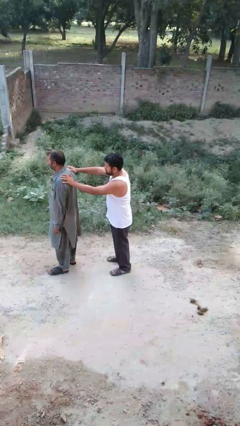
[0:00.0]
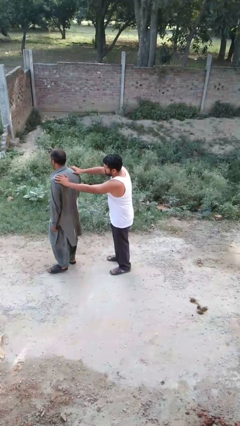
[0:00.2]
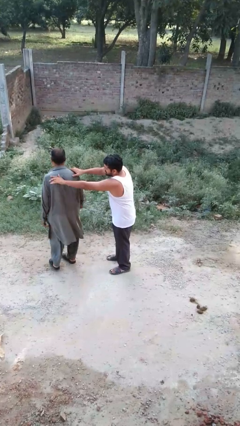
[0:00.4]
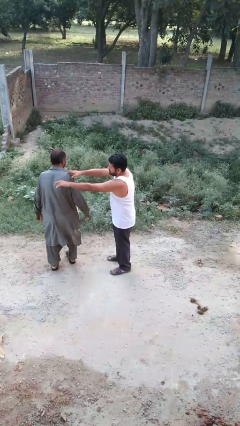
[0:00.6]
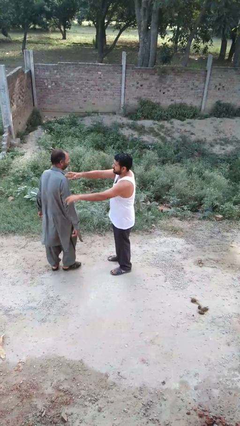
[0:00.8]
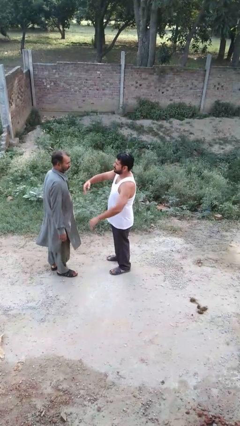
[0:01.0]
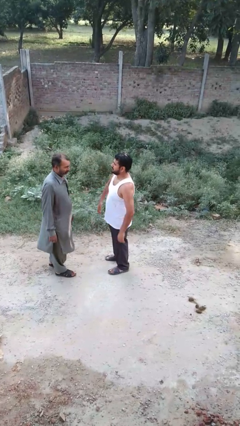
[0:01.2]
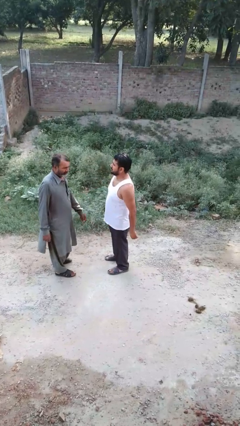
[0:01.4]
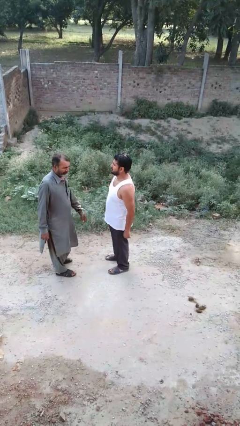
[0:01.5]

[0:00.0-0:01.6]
person spins person around

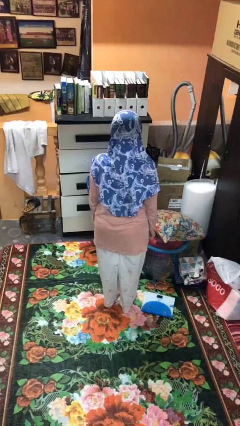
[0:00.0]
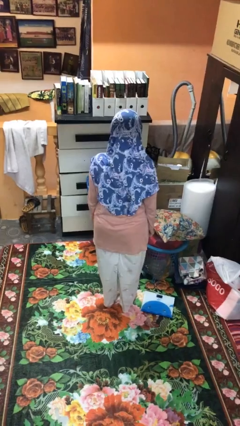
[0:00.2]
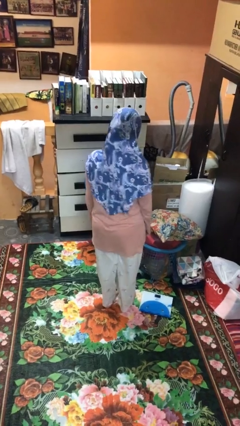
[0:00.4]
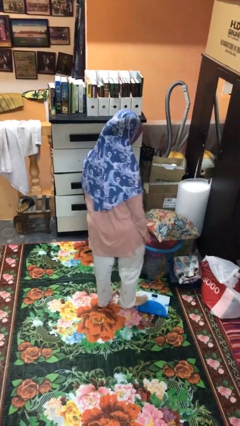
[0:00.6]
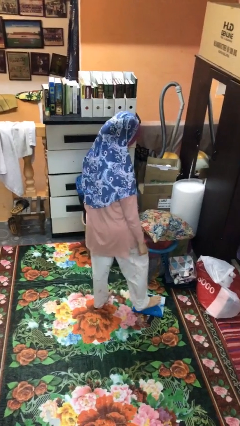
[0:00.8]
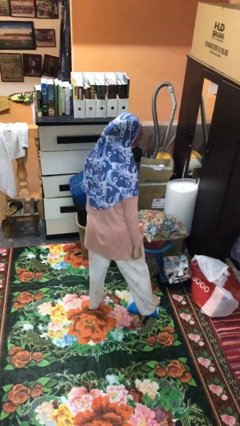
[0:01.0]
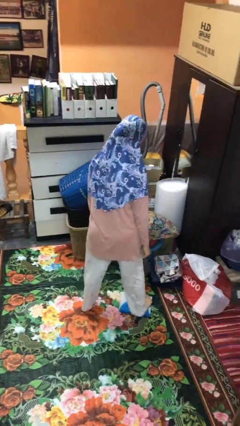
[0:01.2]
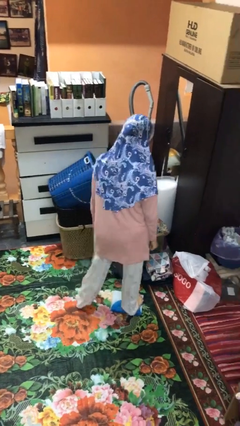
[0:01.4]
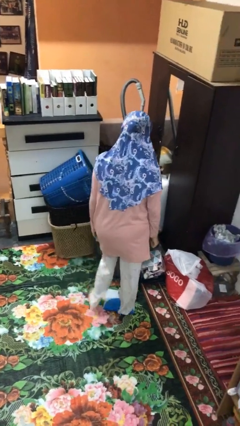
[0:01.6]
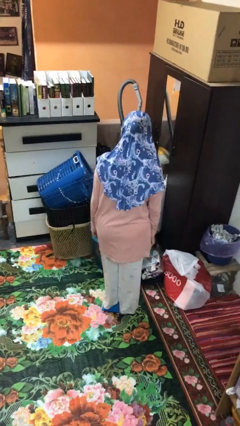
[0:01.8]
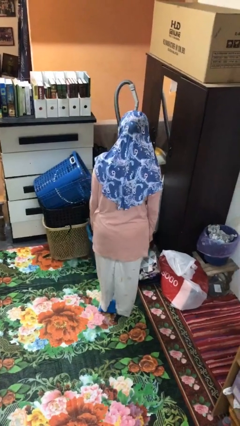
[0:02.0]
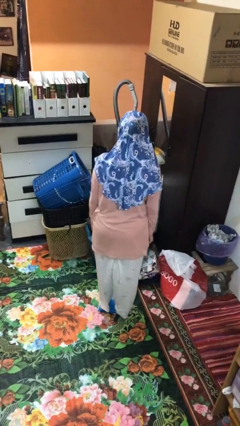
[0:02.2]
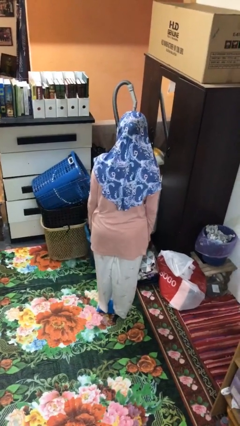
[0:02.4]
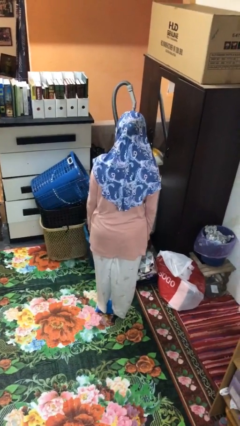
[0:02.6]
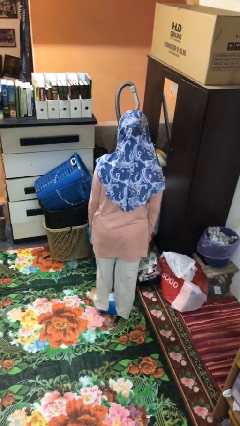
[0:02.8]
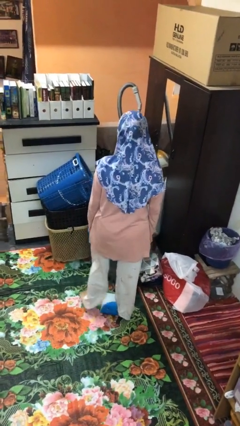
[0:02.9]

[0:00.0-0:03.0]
person uses bodyweight scale

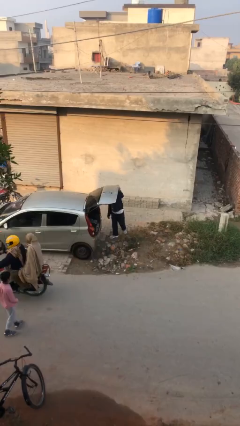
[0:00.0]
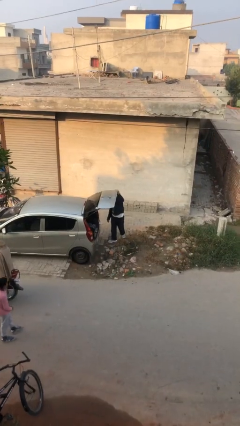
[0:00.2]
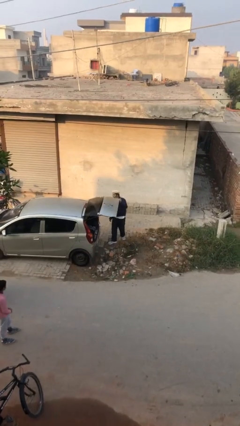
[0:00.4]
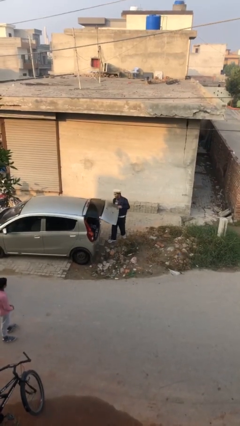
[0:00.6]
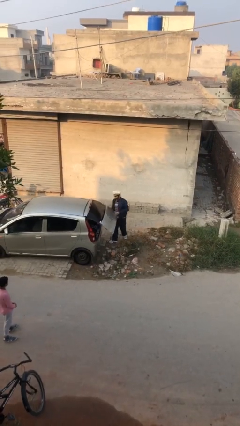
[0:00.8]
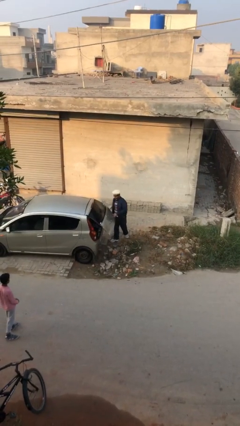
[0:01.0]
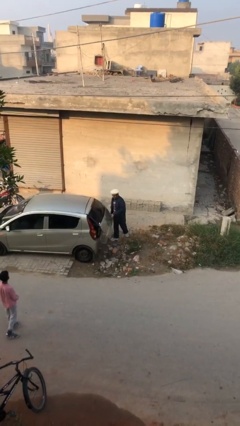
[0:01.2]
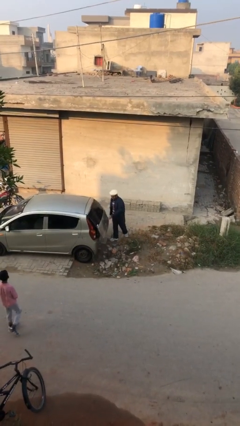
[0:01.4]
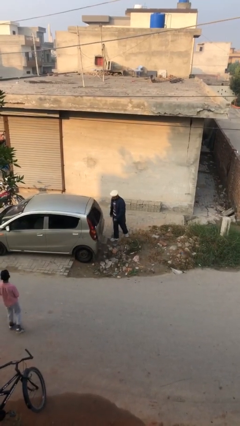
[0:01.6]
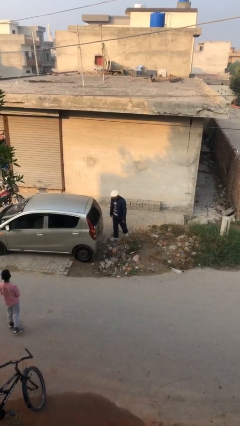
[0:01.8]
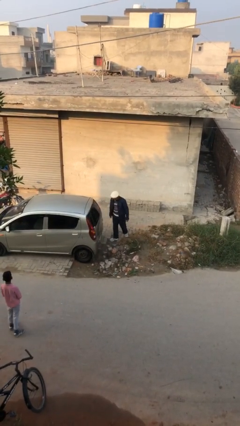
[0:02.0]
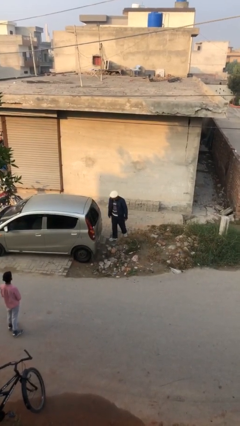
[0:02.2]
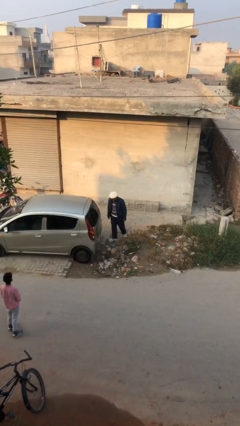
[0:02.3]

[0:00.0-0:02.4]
person closes car trunk

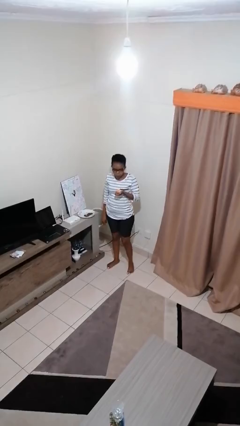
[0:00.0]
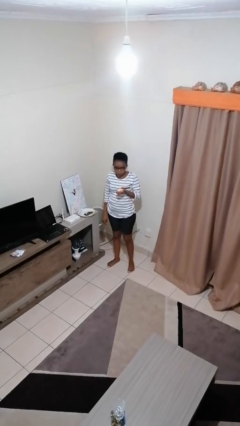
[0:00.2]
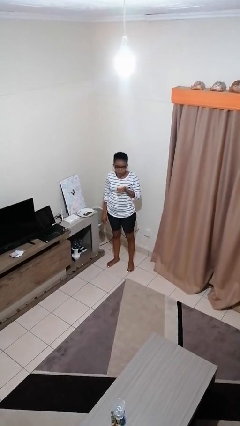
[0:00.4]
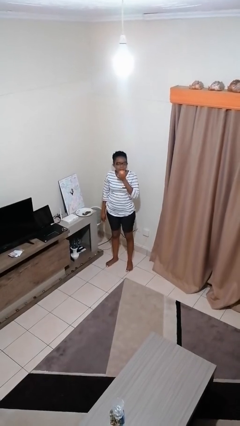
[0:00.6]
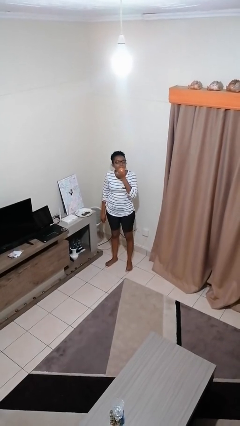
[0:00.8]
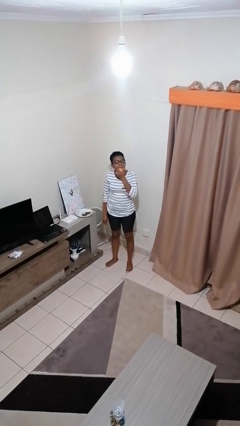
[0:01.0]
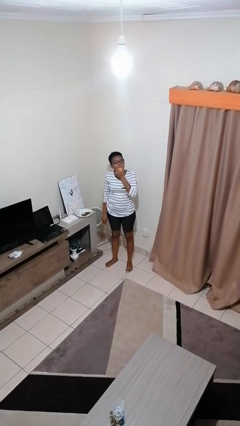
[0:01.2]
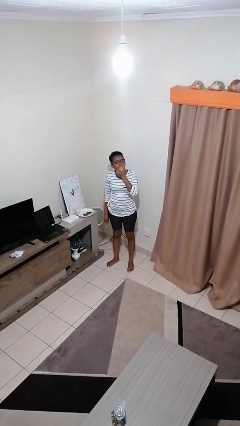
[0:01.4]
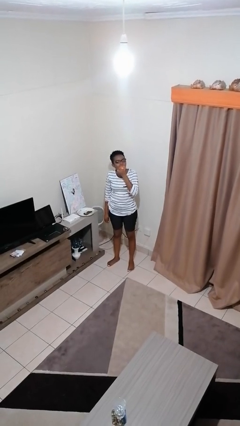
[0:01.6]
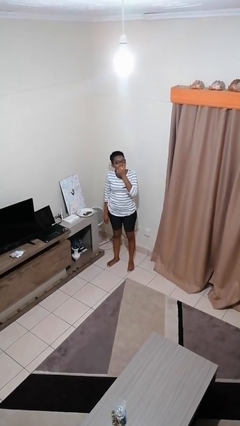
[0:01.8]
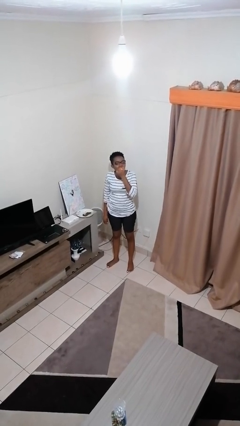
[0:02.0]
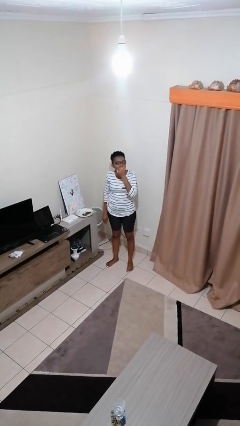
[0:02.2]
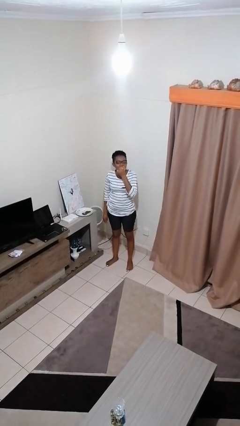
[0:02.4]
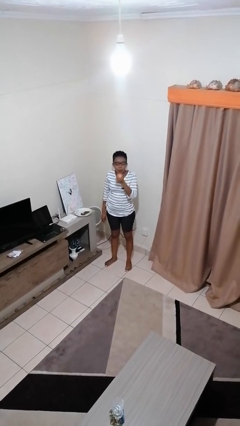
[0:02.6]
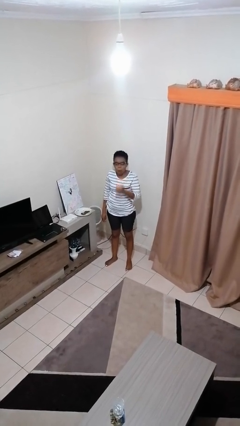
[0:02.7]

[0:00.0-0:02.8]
person eats apple

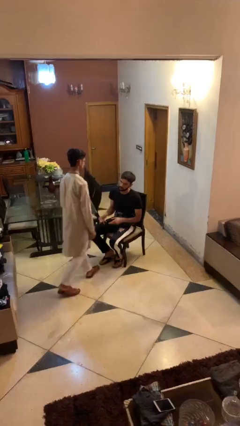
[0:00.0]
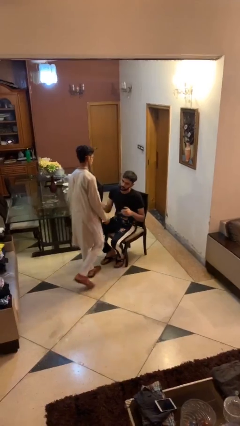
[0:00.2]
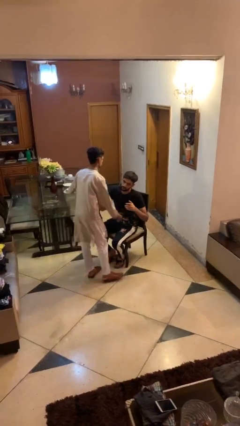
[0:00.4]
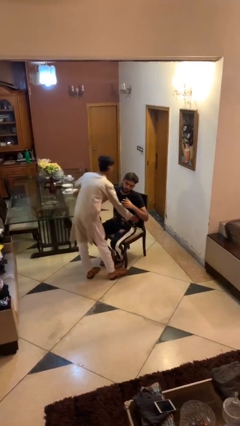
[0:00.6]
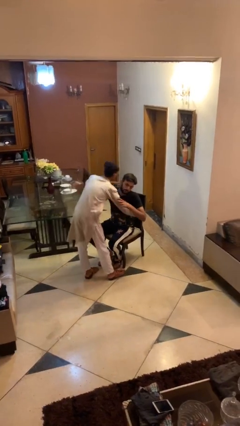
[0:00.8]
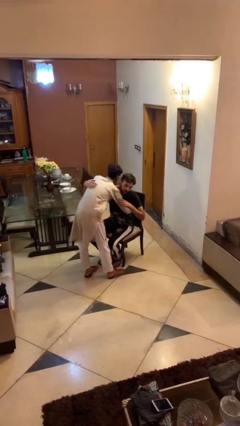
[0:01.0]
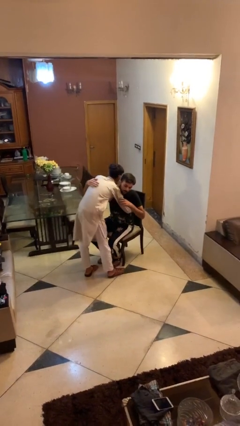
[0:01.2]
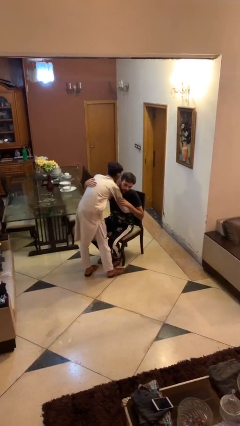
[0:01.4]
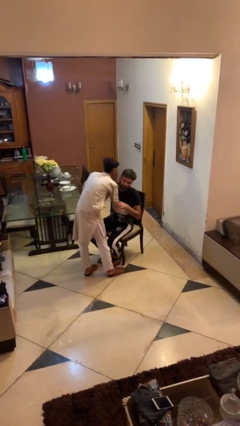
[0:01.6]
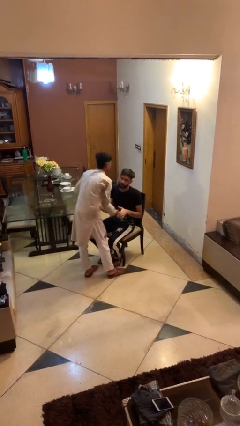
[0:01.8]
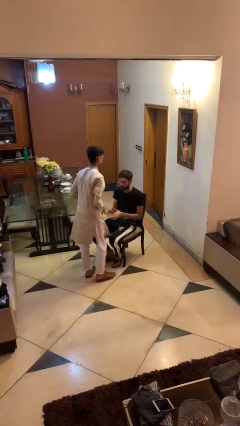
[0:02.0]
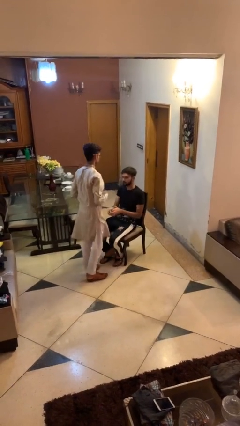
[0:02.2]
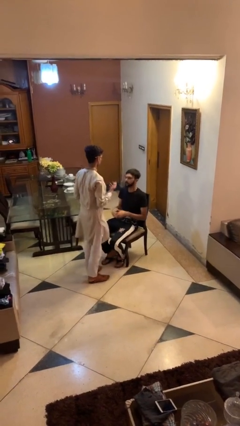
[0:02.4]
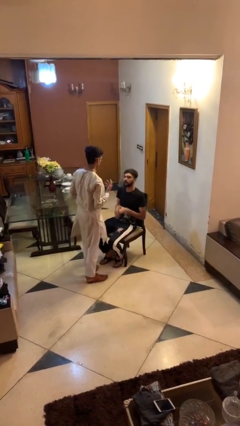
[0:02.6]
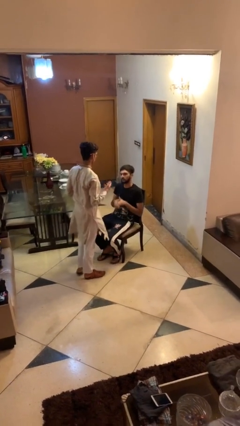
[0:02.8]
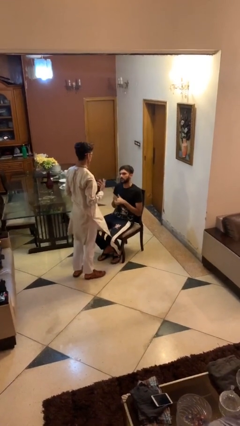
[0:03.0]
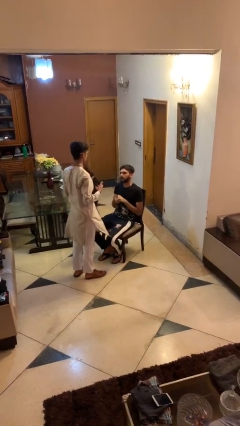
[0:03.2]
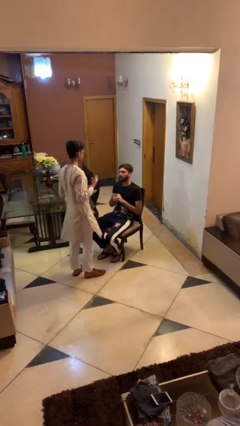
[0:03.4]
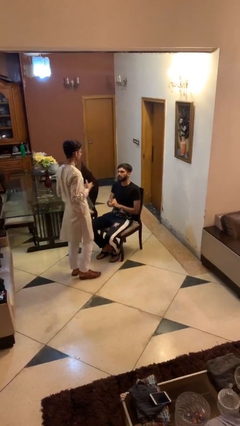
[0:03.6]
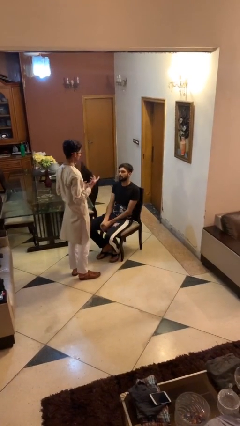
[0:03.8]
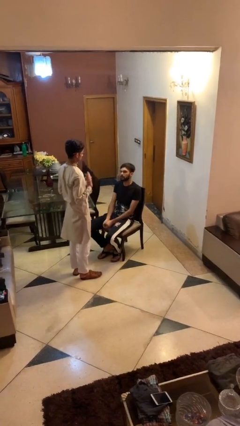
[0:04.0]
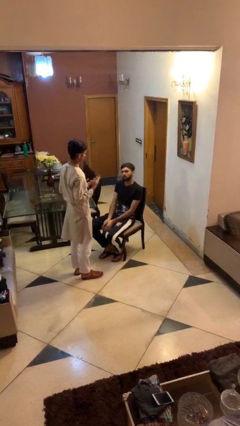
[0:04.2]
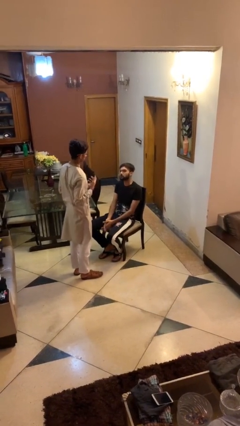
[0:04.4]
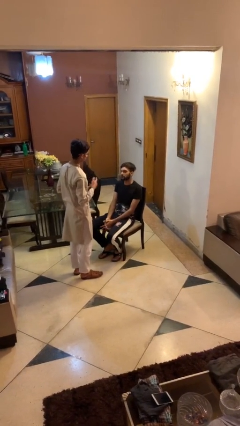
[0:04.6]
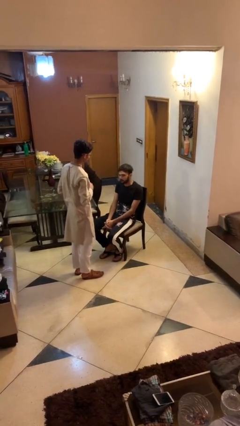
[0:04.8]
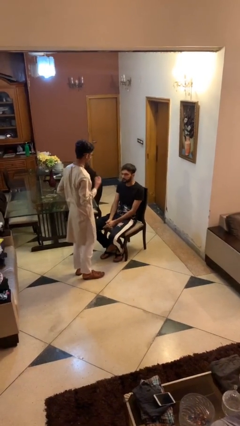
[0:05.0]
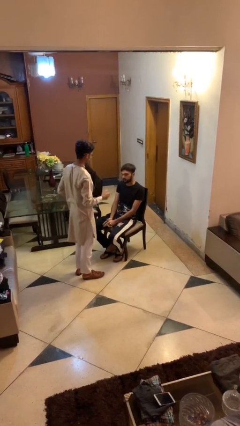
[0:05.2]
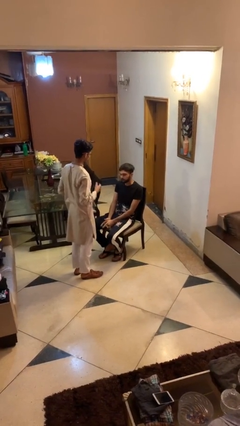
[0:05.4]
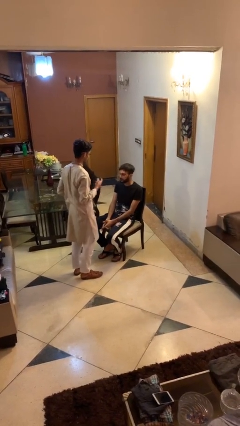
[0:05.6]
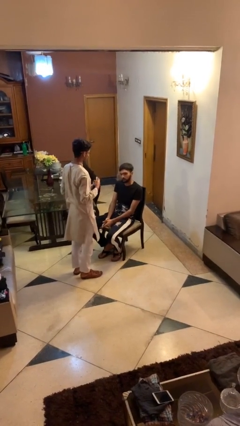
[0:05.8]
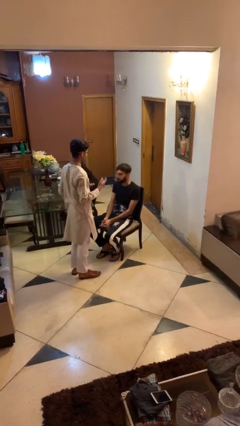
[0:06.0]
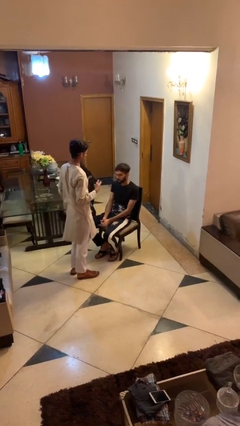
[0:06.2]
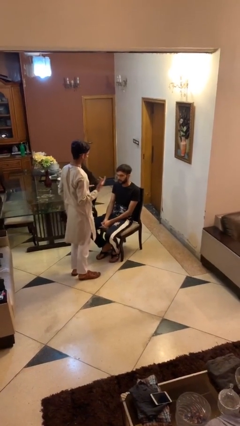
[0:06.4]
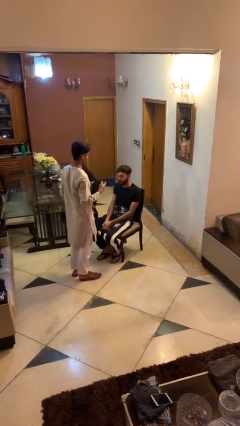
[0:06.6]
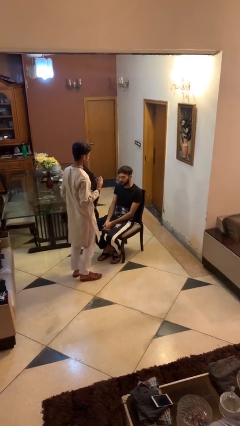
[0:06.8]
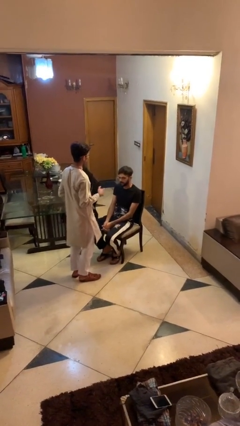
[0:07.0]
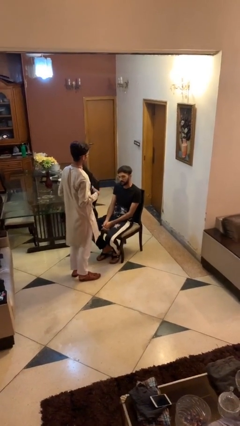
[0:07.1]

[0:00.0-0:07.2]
person embraces person

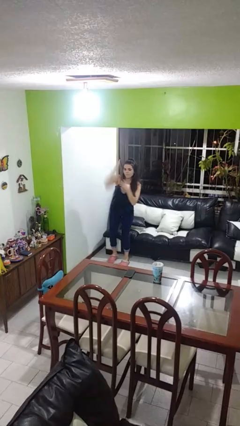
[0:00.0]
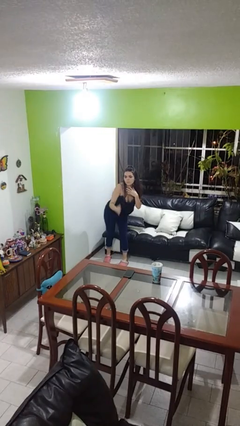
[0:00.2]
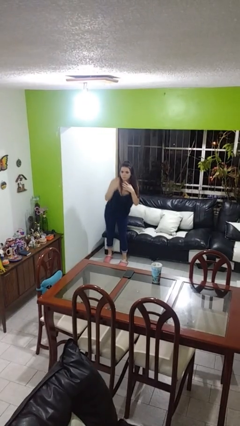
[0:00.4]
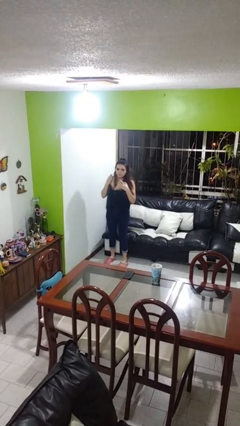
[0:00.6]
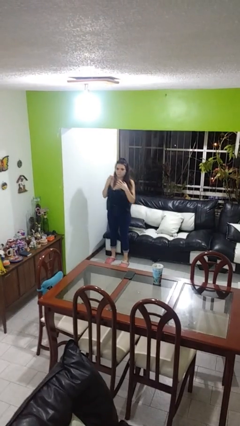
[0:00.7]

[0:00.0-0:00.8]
person karate chop
